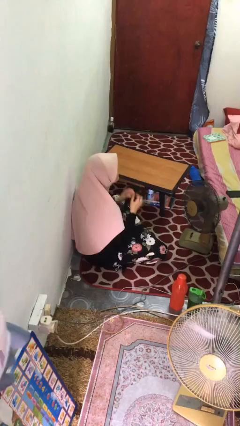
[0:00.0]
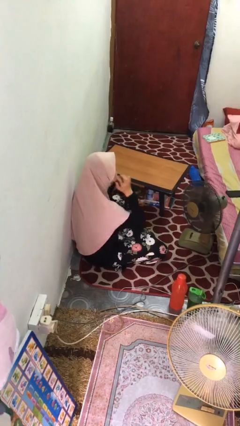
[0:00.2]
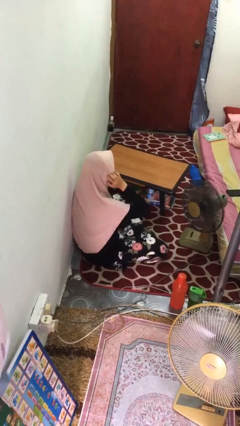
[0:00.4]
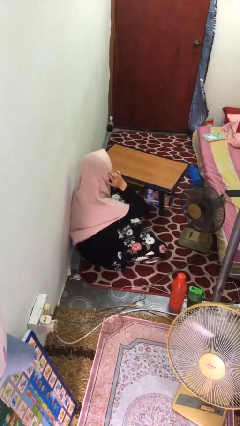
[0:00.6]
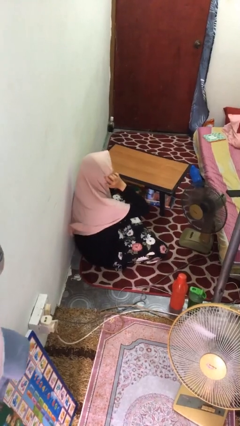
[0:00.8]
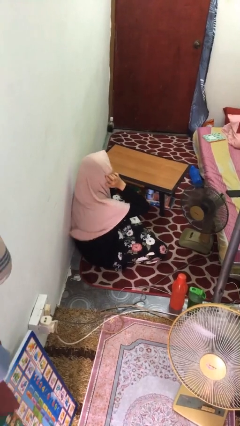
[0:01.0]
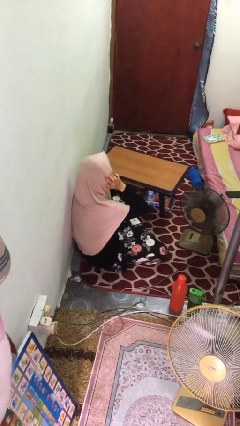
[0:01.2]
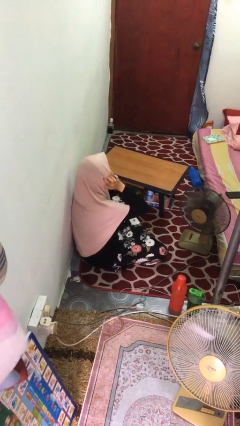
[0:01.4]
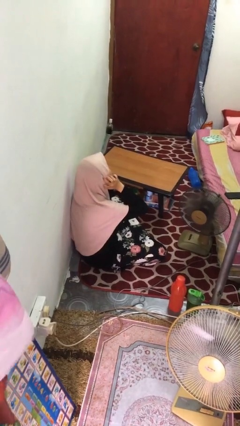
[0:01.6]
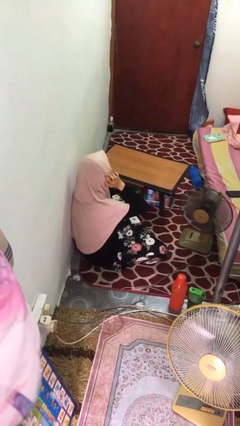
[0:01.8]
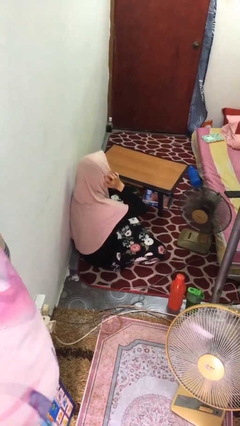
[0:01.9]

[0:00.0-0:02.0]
person puts fingers in ear

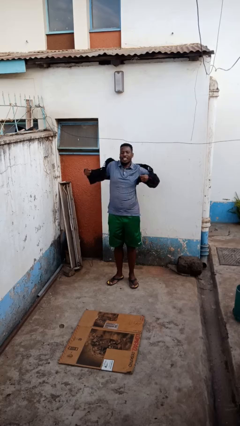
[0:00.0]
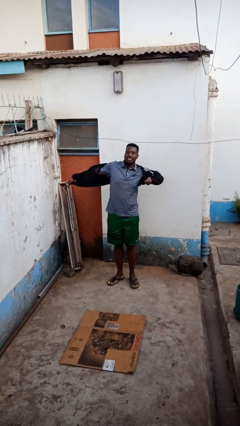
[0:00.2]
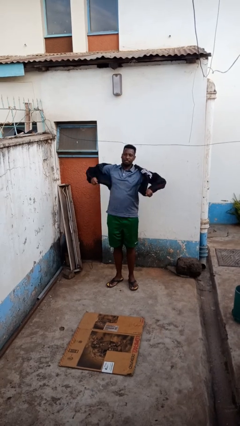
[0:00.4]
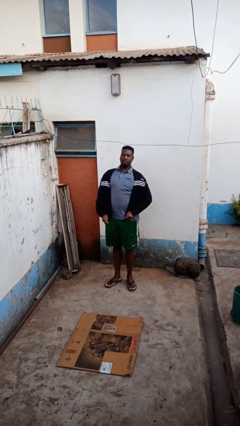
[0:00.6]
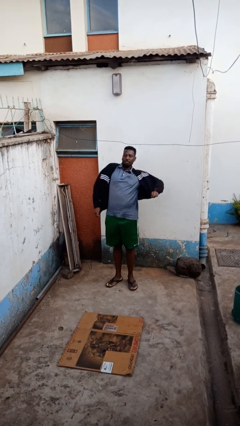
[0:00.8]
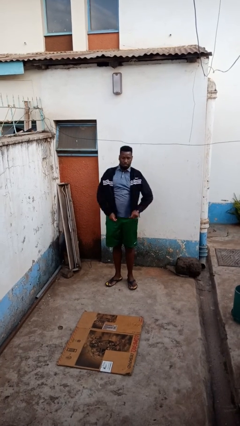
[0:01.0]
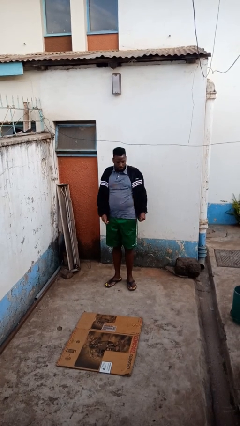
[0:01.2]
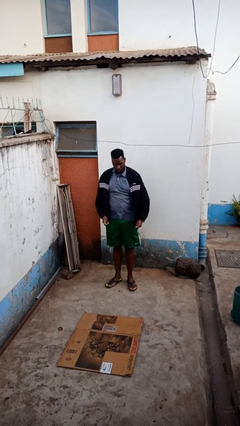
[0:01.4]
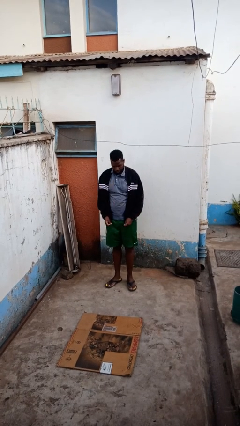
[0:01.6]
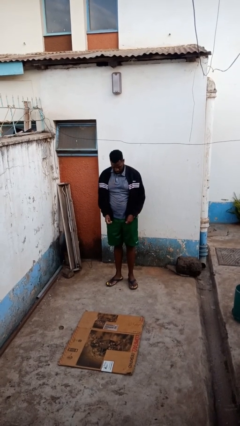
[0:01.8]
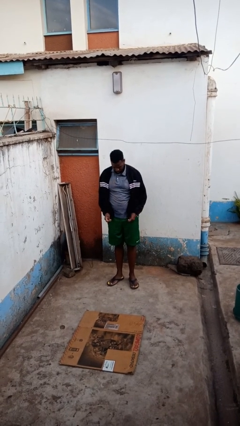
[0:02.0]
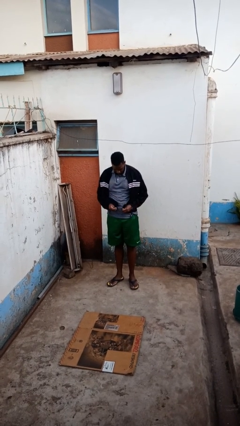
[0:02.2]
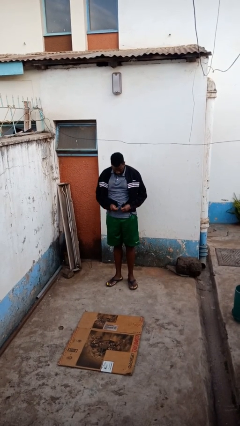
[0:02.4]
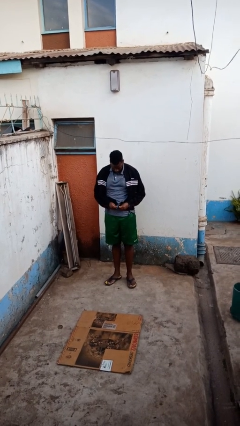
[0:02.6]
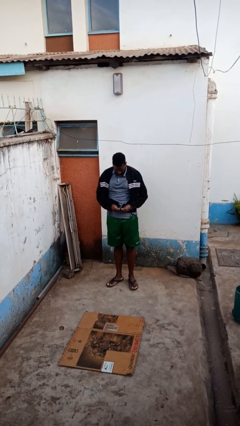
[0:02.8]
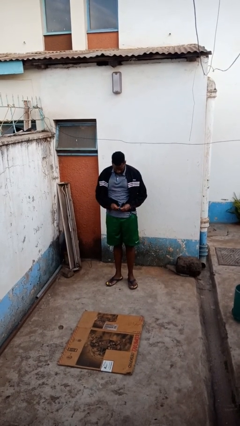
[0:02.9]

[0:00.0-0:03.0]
person puts on jacket

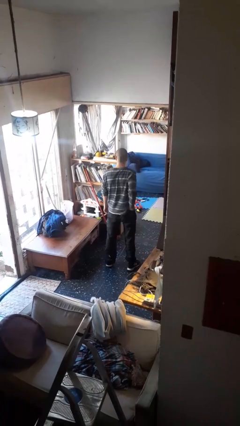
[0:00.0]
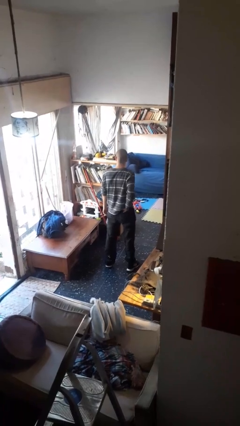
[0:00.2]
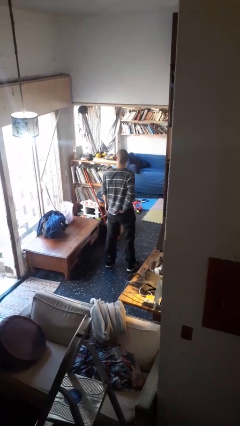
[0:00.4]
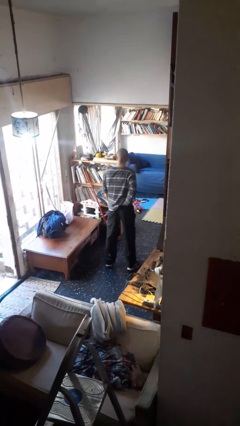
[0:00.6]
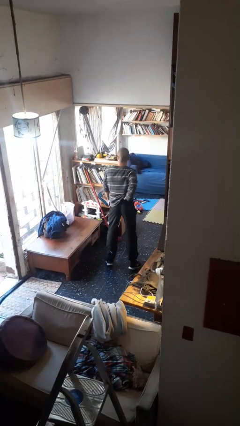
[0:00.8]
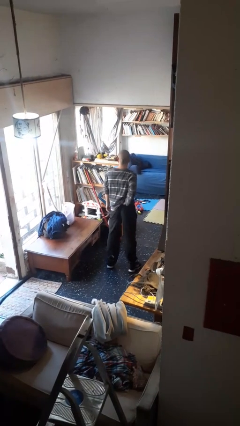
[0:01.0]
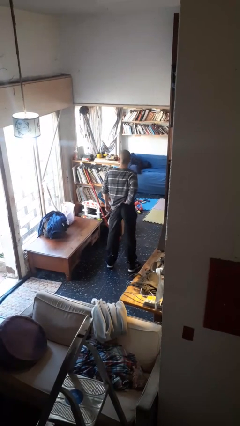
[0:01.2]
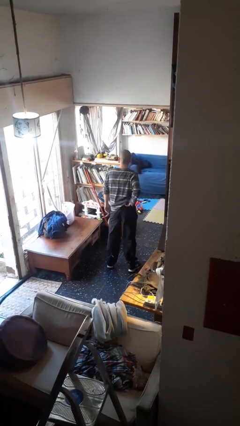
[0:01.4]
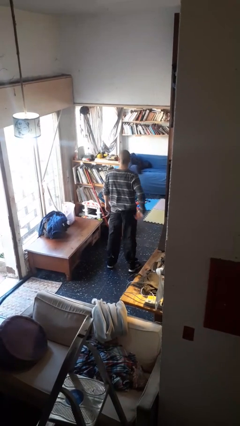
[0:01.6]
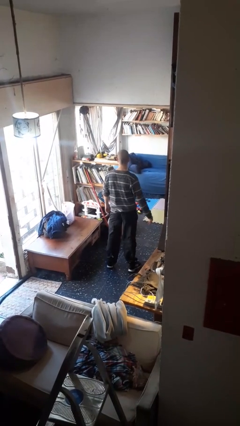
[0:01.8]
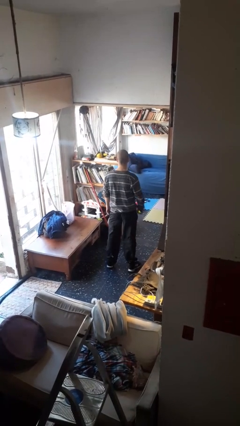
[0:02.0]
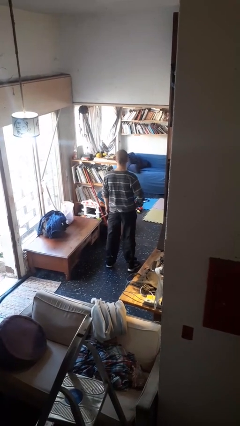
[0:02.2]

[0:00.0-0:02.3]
person hikes up pants

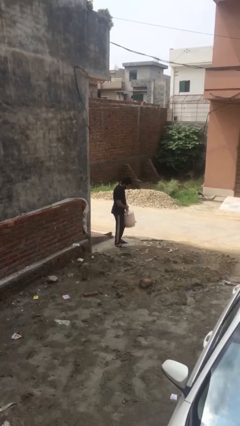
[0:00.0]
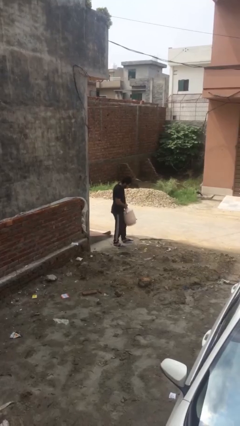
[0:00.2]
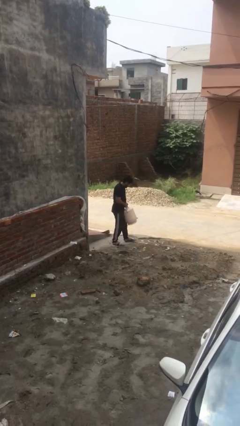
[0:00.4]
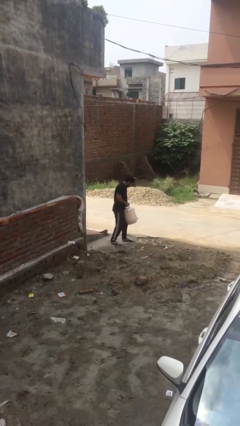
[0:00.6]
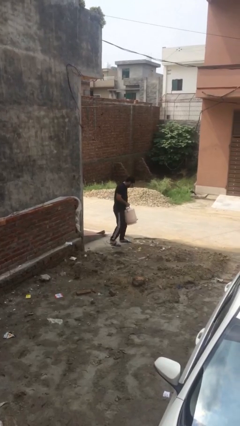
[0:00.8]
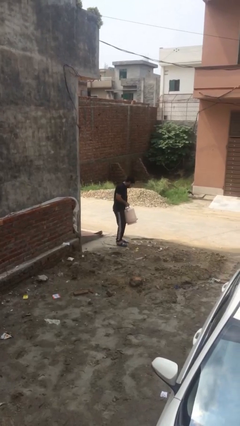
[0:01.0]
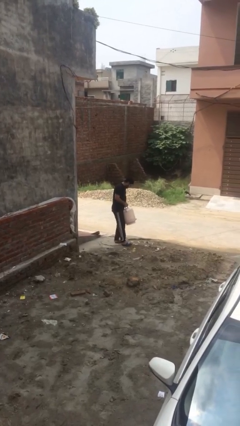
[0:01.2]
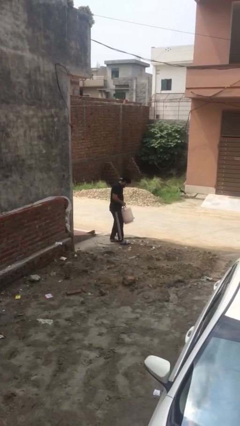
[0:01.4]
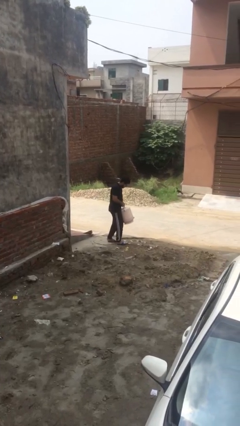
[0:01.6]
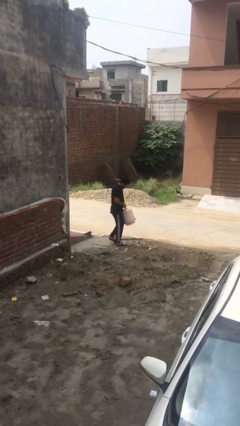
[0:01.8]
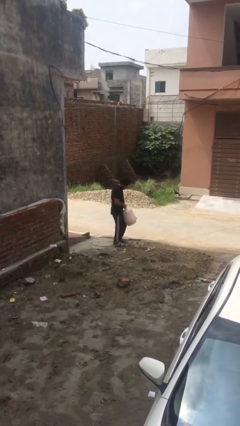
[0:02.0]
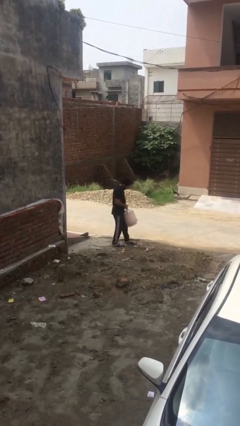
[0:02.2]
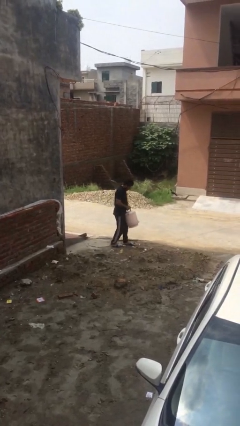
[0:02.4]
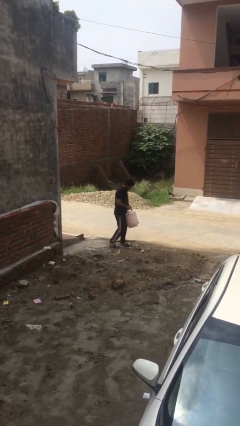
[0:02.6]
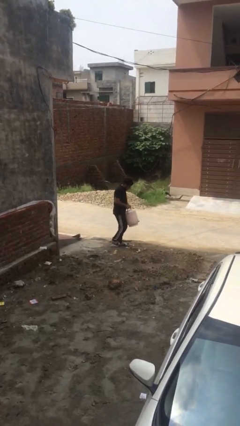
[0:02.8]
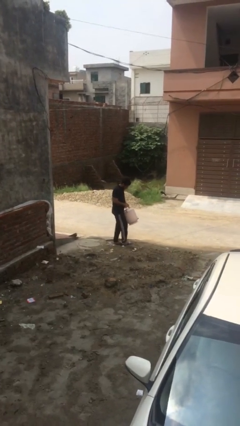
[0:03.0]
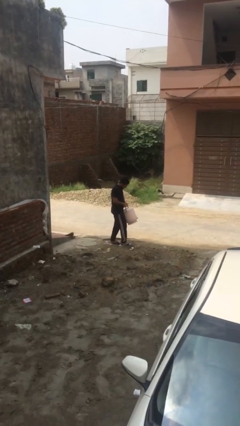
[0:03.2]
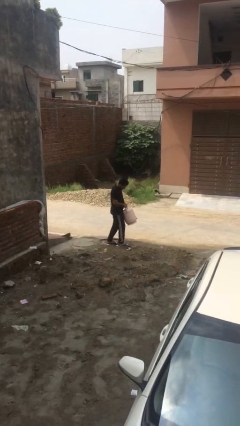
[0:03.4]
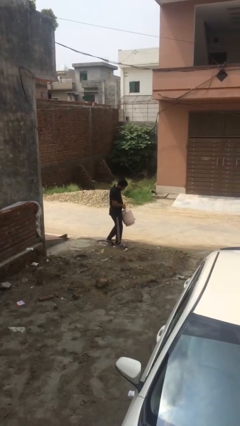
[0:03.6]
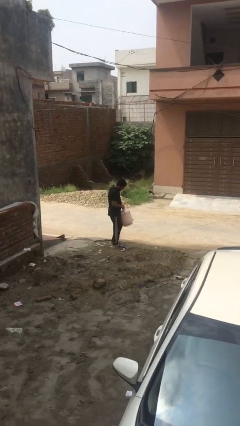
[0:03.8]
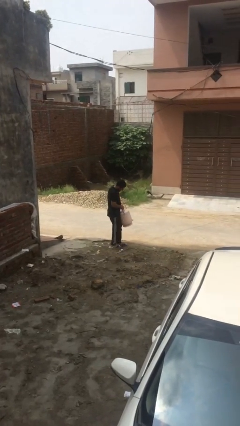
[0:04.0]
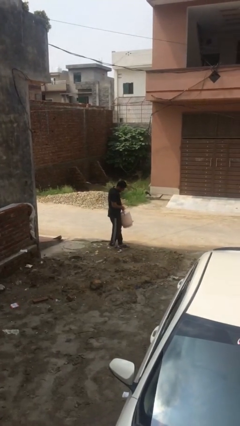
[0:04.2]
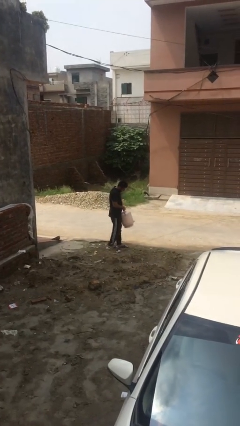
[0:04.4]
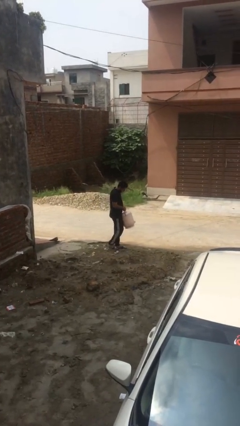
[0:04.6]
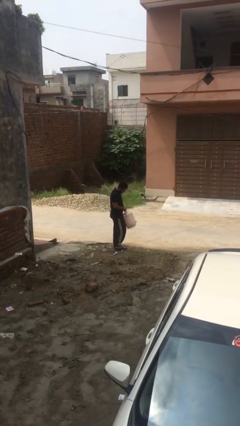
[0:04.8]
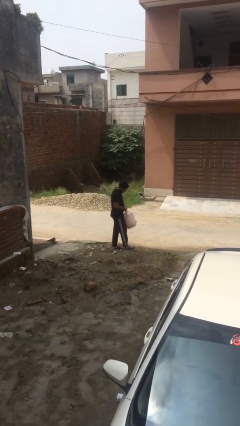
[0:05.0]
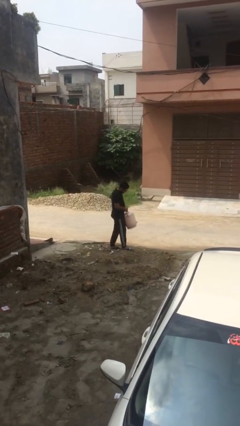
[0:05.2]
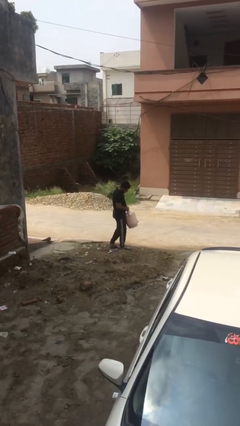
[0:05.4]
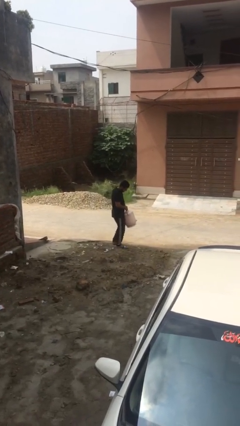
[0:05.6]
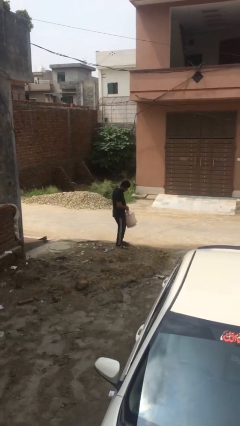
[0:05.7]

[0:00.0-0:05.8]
person carries heavy object

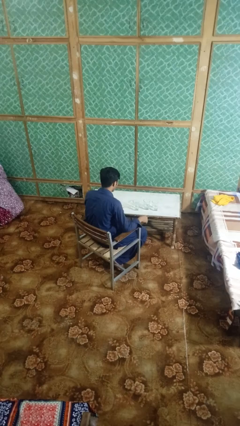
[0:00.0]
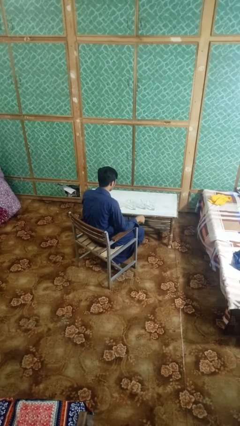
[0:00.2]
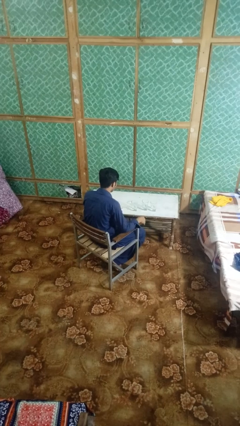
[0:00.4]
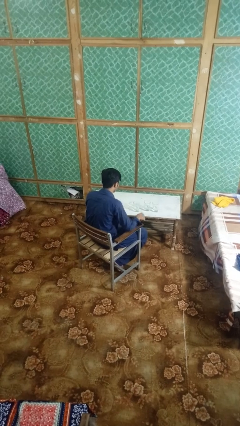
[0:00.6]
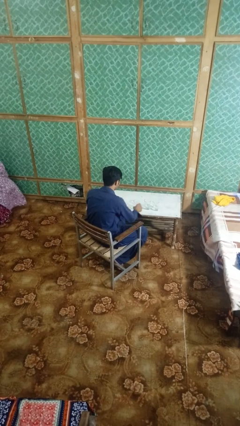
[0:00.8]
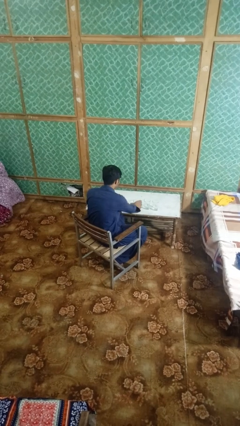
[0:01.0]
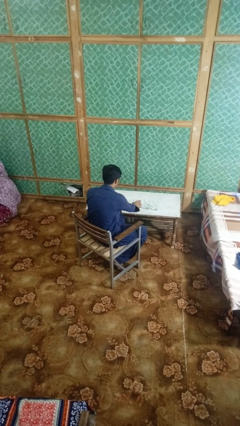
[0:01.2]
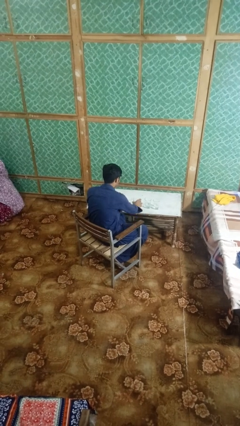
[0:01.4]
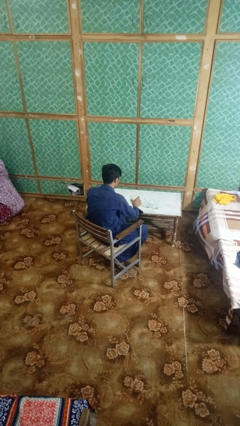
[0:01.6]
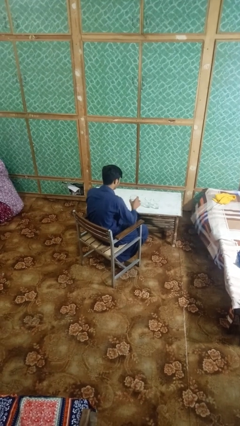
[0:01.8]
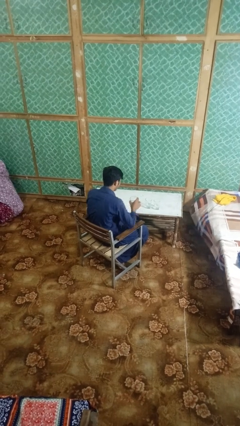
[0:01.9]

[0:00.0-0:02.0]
person picks up object from table

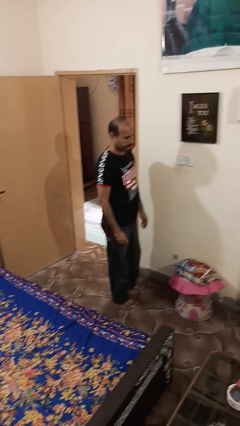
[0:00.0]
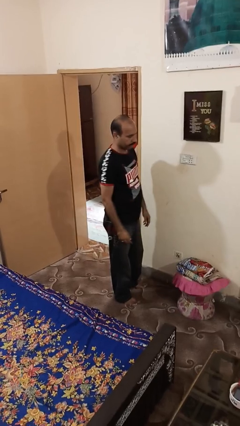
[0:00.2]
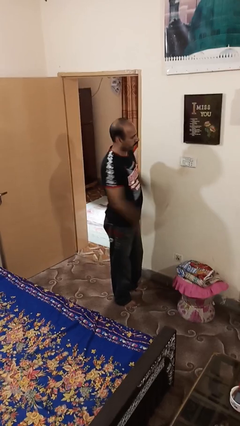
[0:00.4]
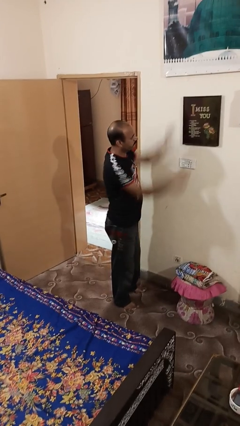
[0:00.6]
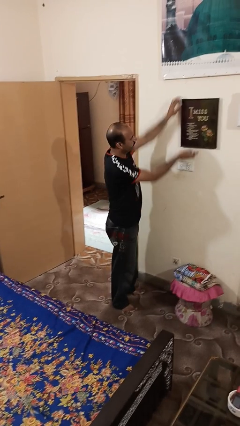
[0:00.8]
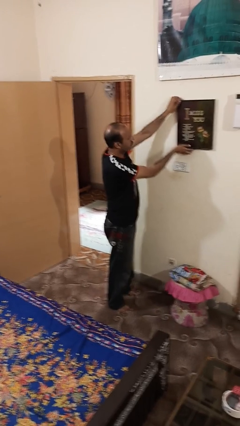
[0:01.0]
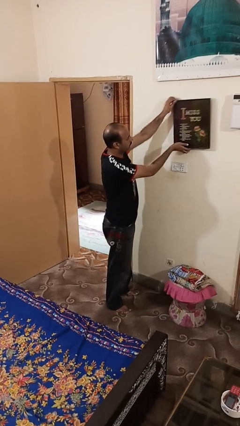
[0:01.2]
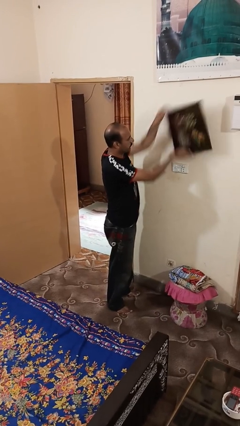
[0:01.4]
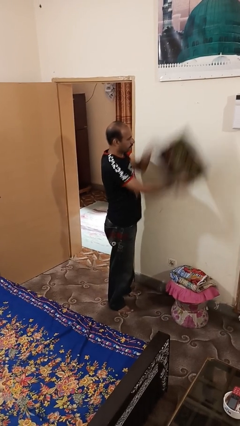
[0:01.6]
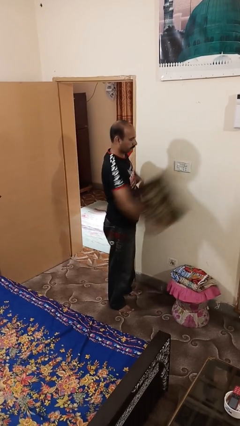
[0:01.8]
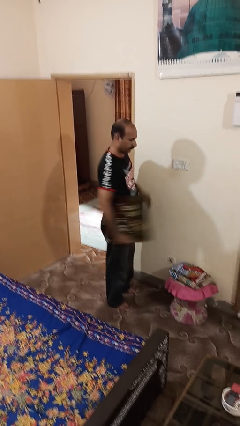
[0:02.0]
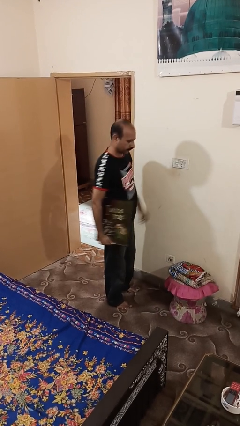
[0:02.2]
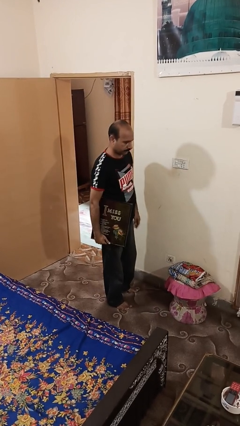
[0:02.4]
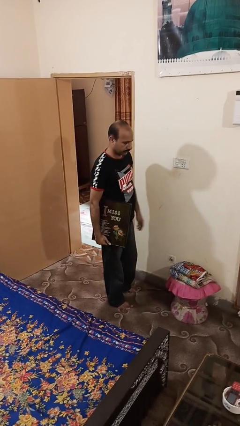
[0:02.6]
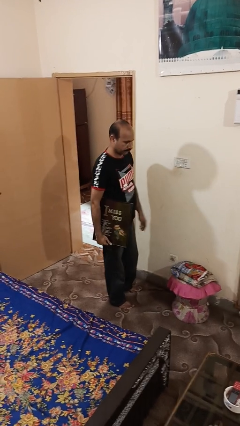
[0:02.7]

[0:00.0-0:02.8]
person takes down picture frame
